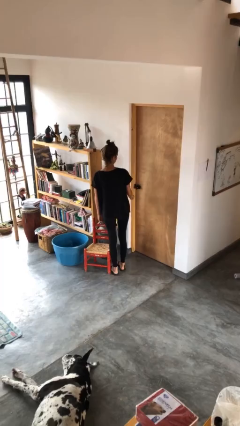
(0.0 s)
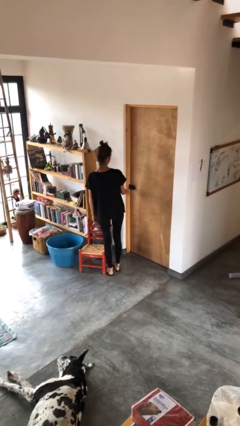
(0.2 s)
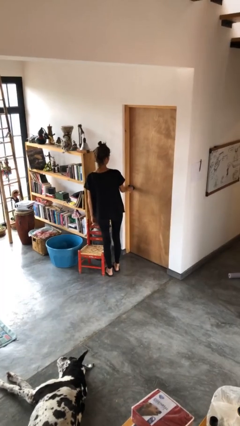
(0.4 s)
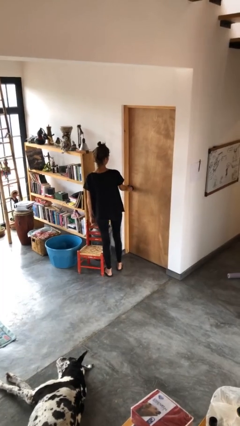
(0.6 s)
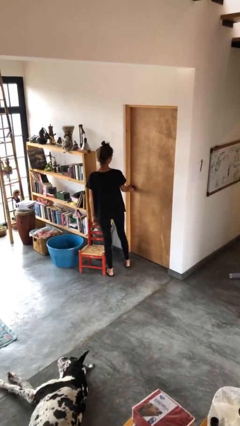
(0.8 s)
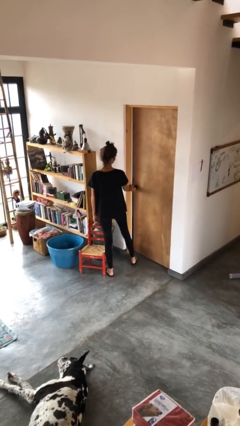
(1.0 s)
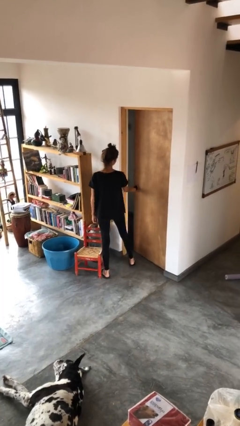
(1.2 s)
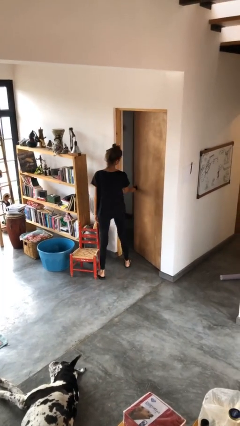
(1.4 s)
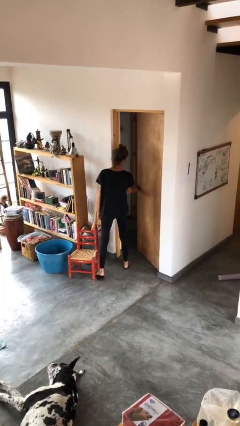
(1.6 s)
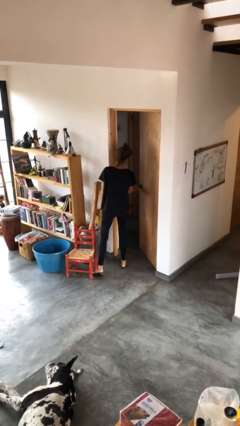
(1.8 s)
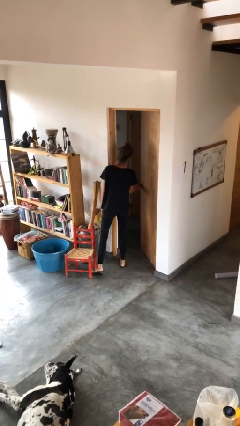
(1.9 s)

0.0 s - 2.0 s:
person opens facility door

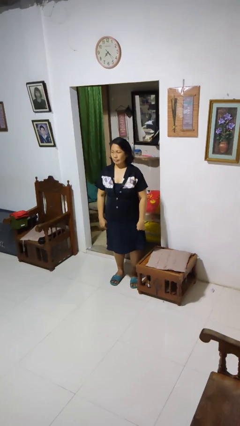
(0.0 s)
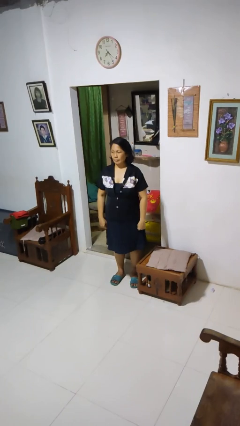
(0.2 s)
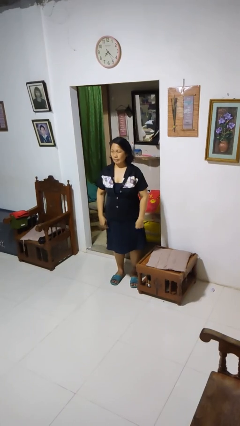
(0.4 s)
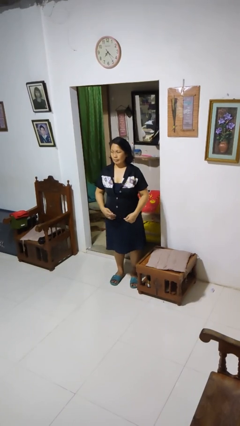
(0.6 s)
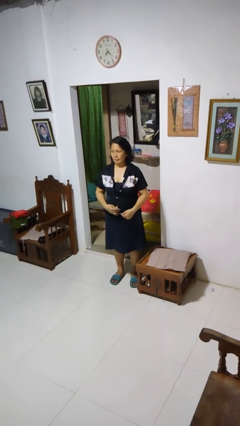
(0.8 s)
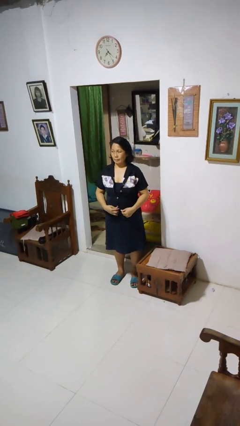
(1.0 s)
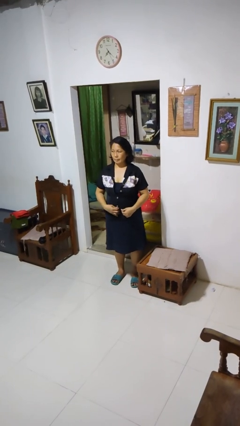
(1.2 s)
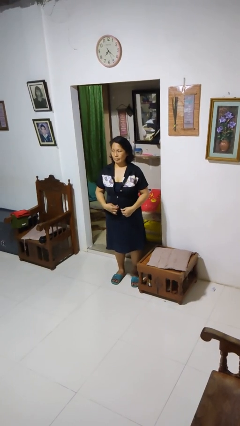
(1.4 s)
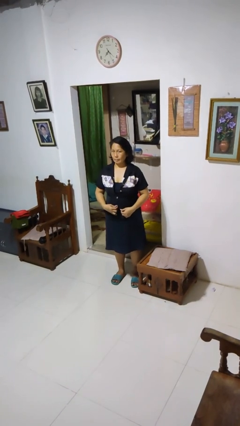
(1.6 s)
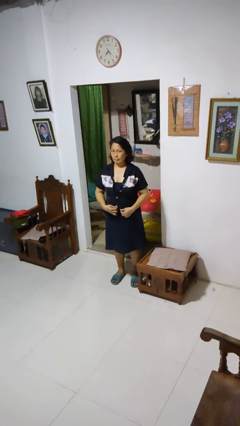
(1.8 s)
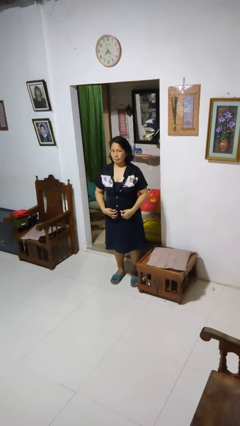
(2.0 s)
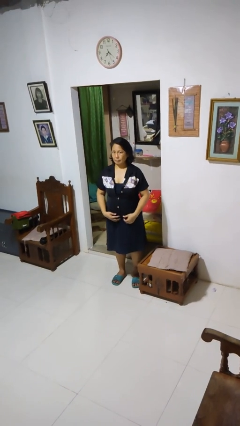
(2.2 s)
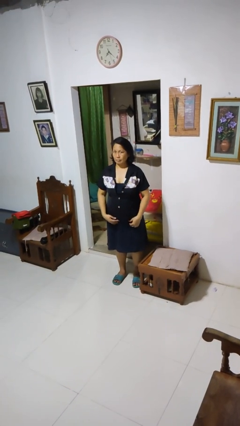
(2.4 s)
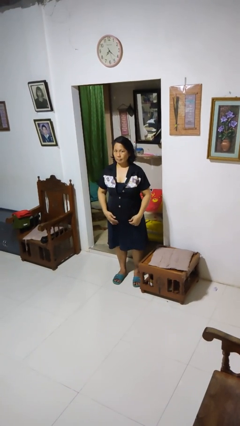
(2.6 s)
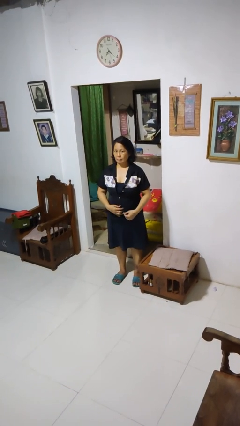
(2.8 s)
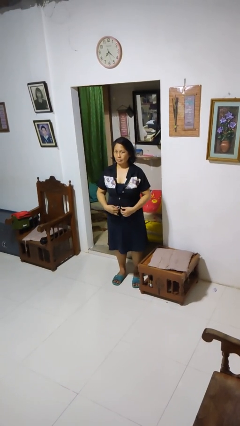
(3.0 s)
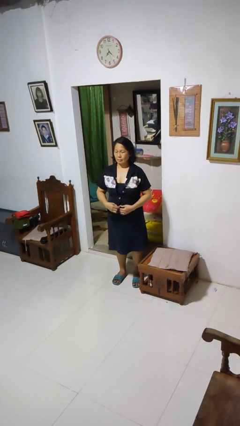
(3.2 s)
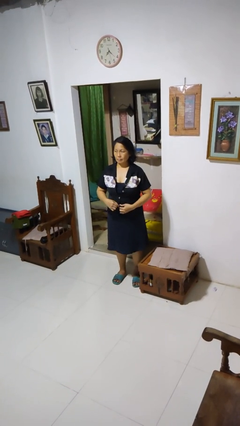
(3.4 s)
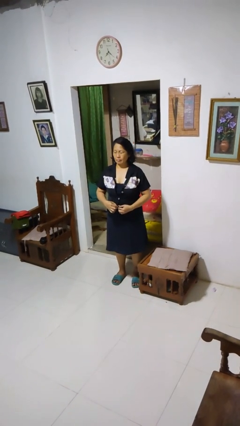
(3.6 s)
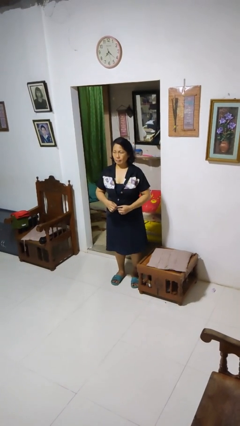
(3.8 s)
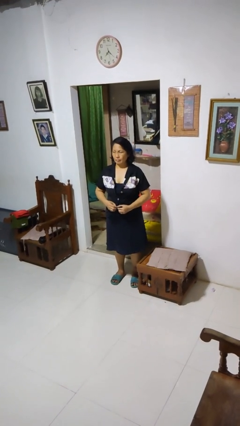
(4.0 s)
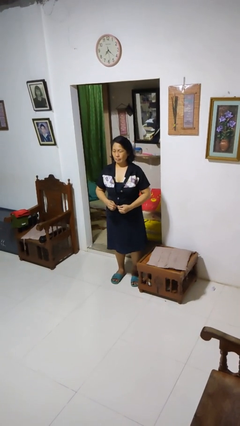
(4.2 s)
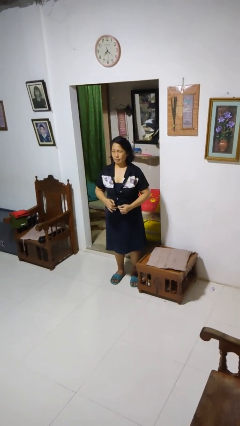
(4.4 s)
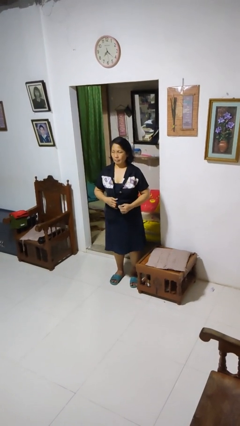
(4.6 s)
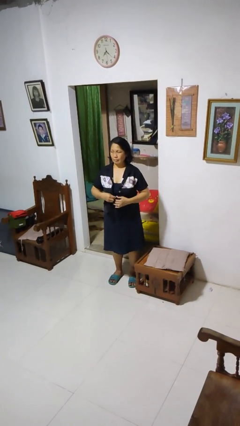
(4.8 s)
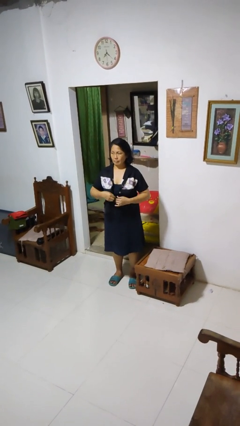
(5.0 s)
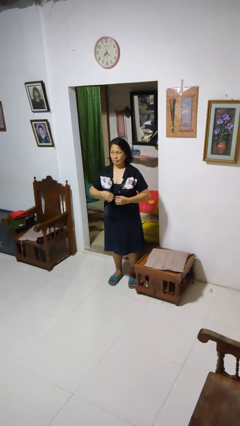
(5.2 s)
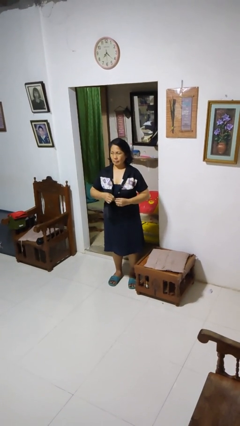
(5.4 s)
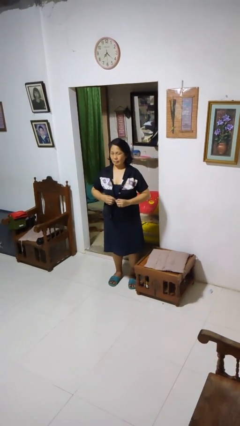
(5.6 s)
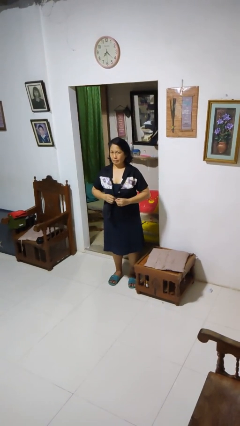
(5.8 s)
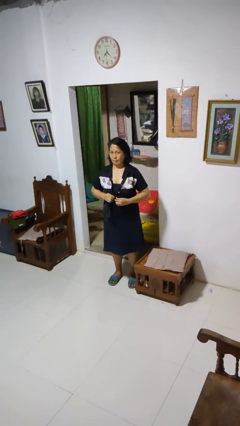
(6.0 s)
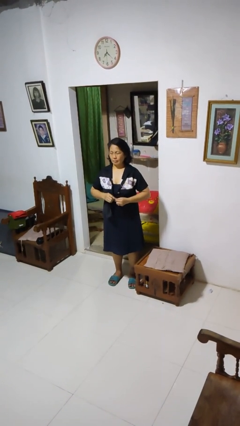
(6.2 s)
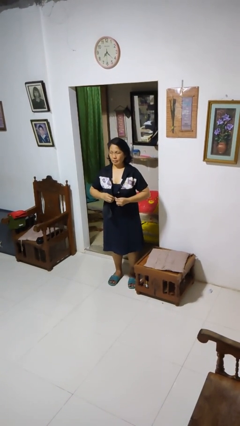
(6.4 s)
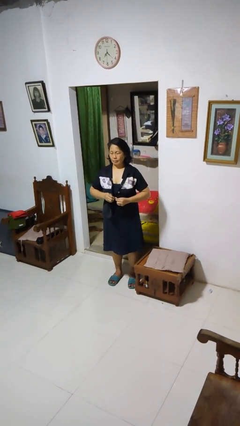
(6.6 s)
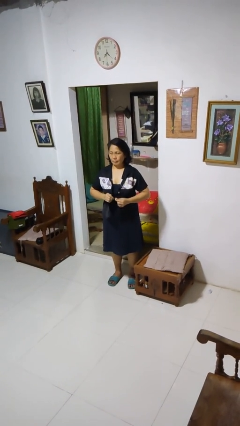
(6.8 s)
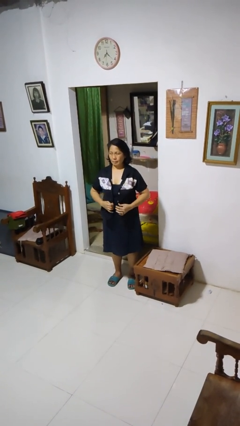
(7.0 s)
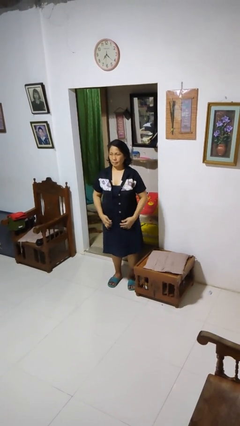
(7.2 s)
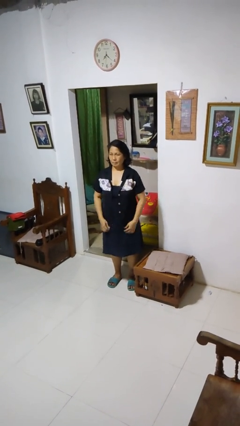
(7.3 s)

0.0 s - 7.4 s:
person unbuttons shirt

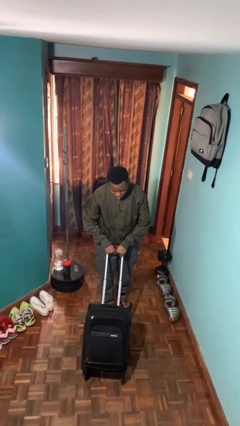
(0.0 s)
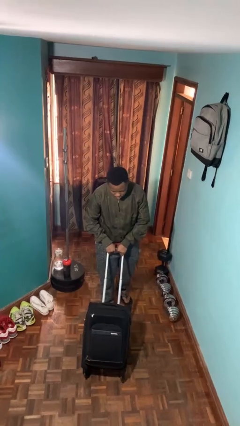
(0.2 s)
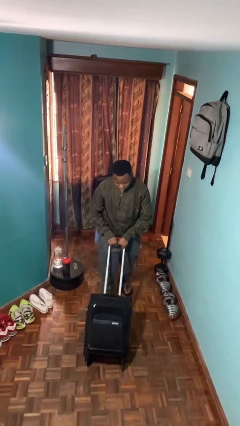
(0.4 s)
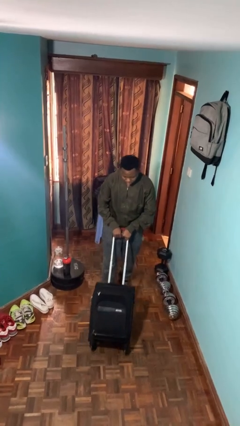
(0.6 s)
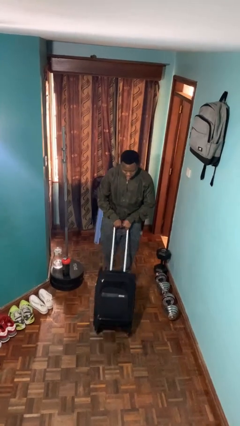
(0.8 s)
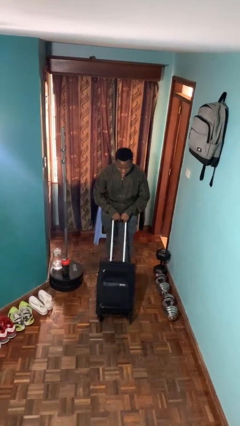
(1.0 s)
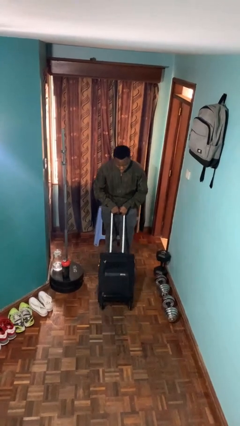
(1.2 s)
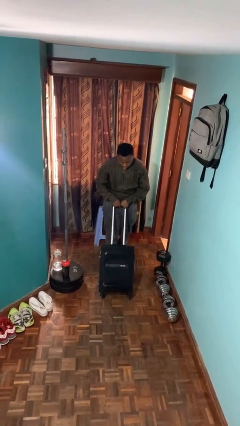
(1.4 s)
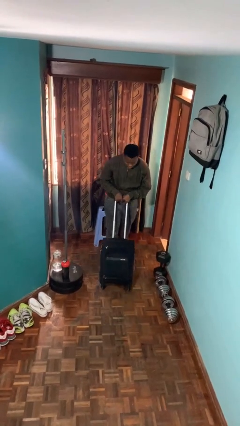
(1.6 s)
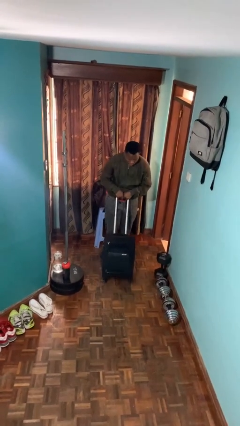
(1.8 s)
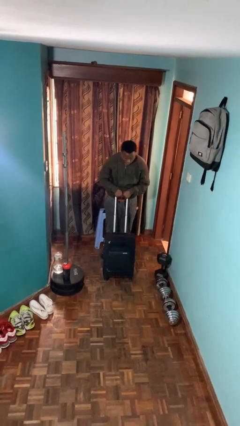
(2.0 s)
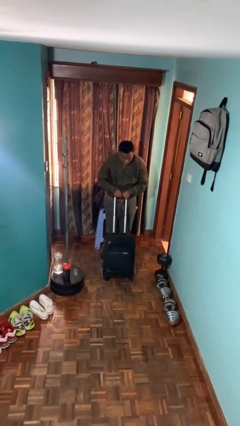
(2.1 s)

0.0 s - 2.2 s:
person pulls wheeled cart

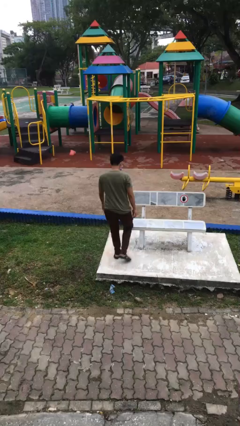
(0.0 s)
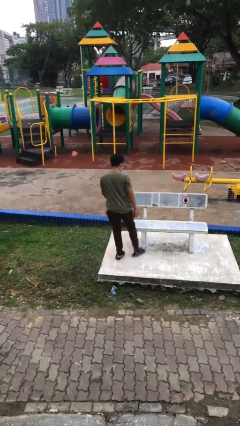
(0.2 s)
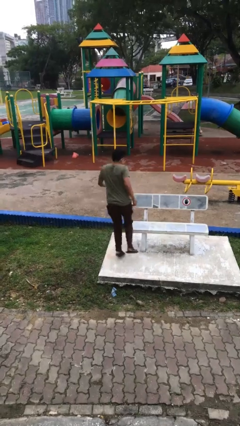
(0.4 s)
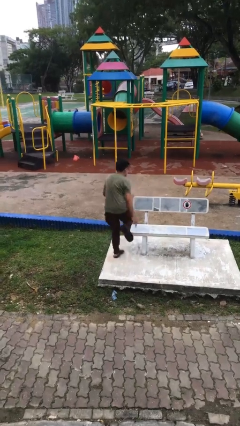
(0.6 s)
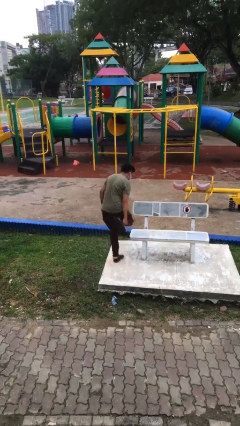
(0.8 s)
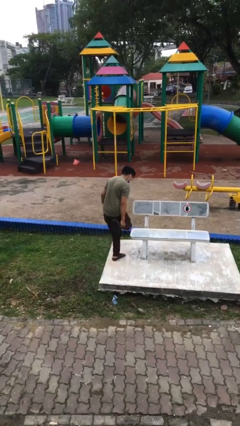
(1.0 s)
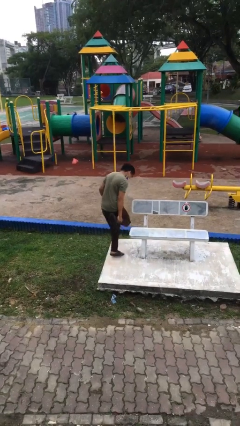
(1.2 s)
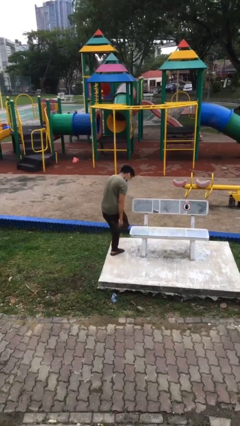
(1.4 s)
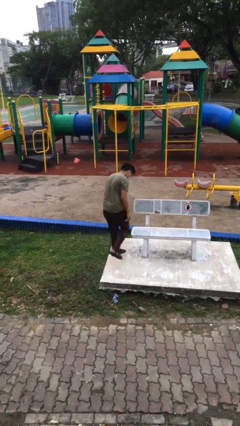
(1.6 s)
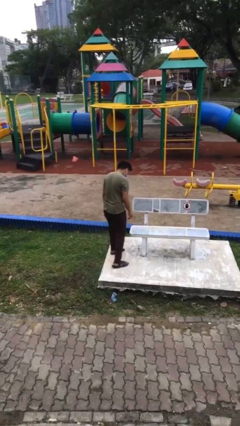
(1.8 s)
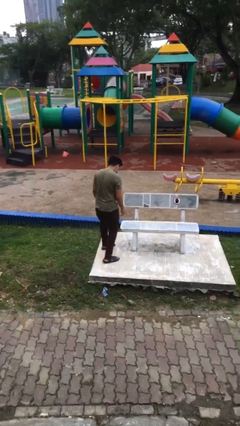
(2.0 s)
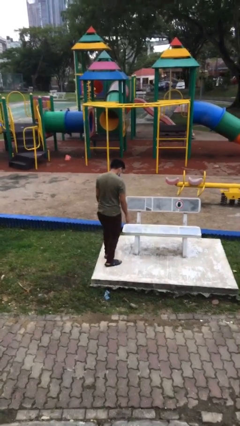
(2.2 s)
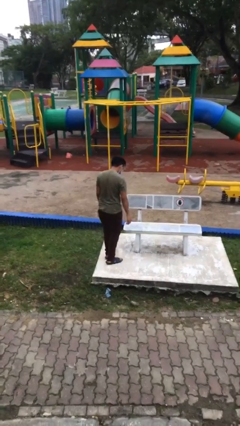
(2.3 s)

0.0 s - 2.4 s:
person stubs toe

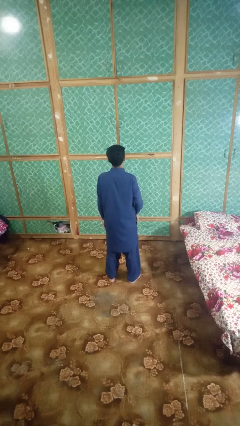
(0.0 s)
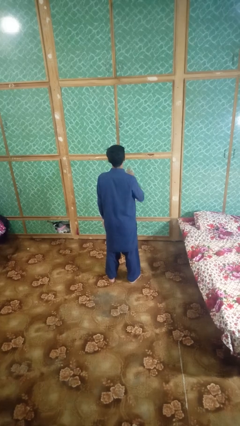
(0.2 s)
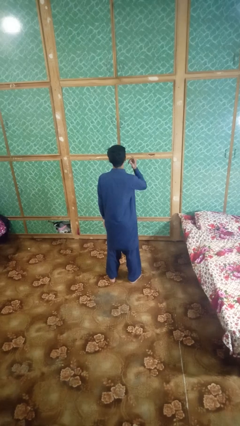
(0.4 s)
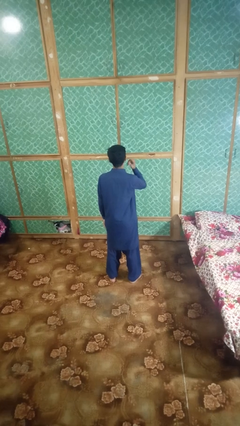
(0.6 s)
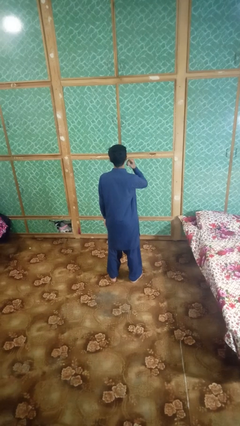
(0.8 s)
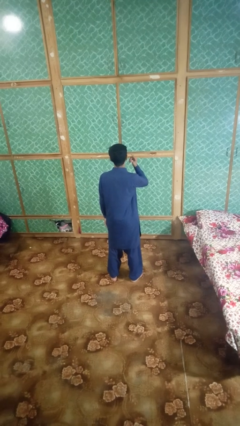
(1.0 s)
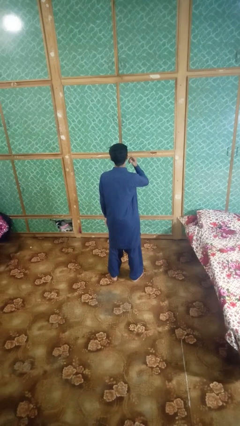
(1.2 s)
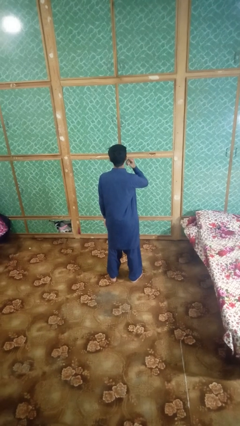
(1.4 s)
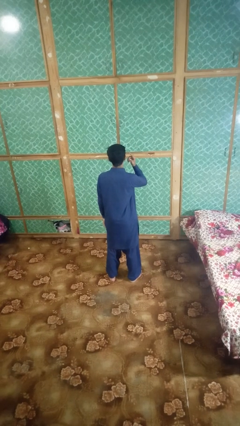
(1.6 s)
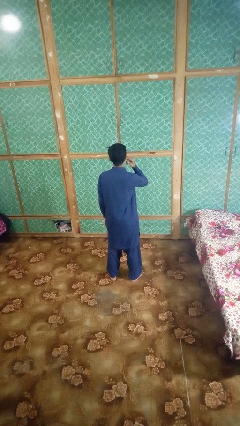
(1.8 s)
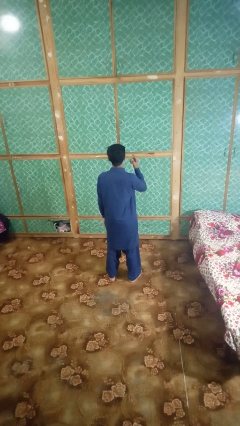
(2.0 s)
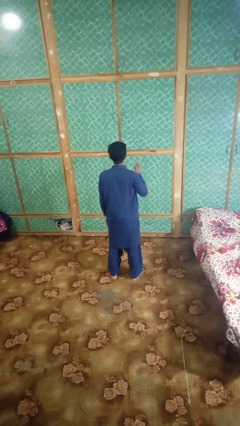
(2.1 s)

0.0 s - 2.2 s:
person gestures listen closely

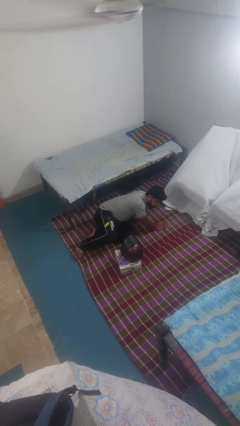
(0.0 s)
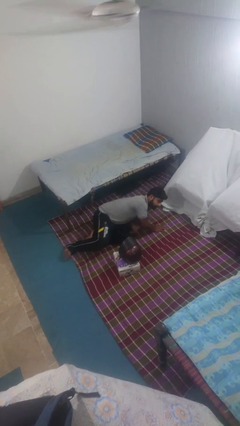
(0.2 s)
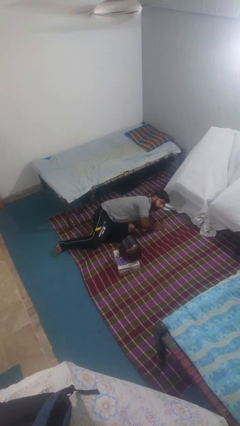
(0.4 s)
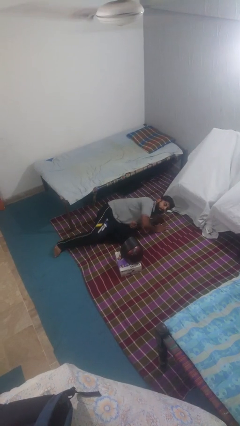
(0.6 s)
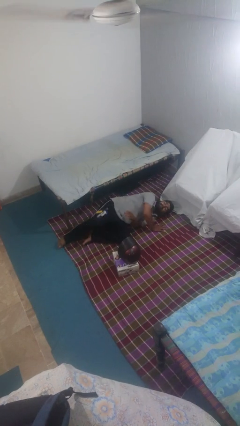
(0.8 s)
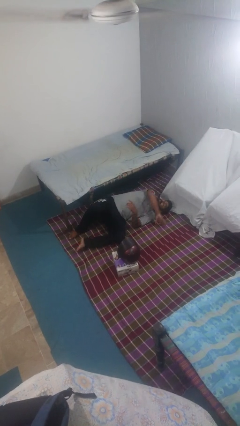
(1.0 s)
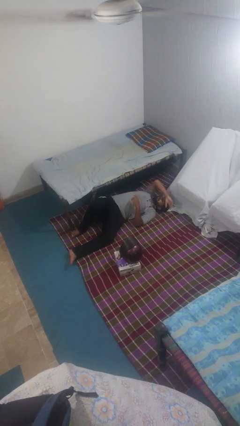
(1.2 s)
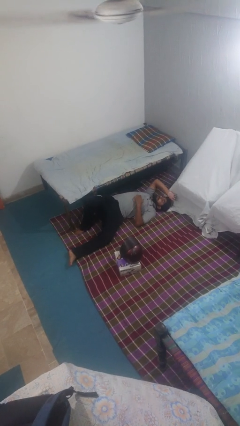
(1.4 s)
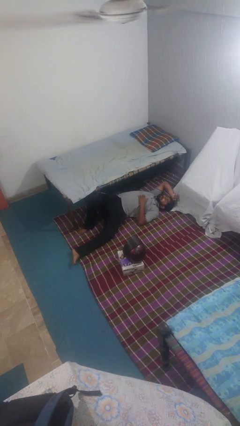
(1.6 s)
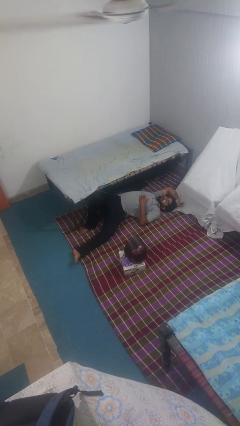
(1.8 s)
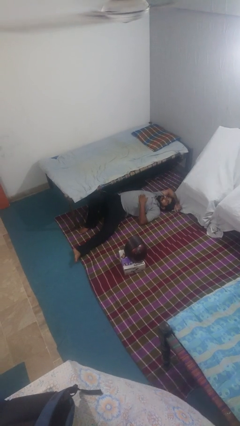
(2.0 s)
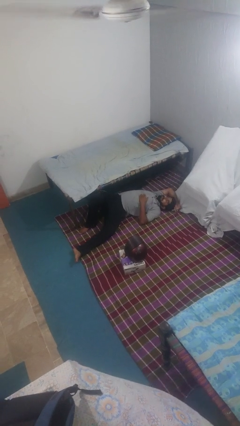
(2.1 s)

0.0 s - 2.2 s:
person lies down on floor
